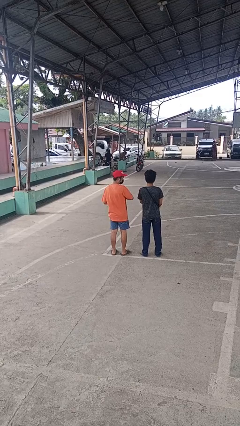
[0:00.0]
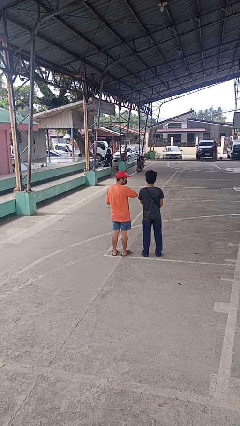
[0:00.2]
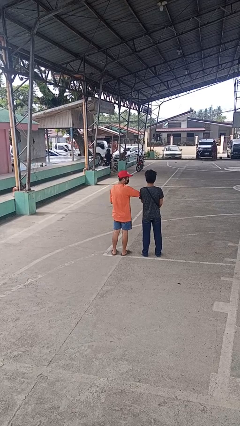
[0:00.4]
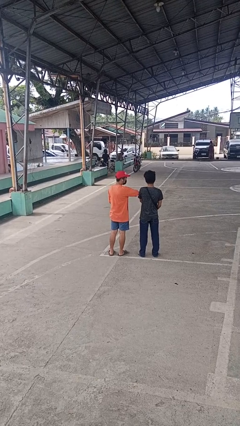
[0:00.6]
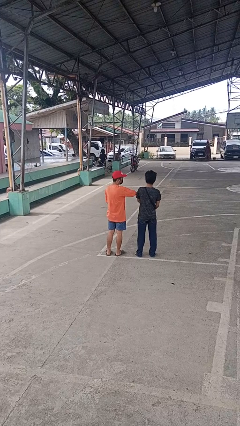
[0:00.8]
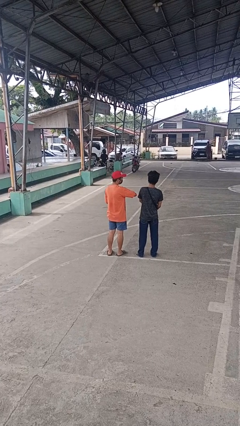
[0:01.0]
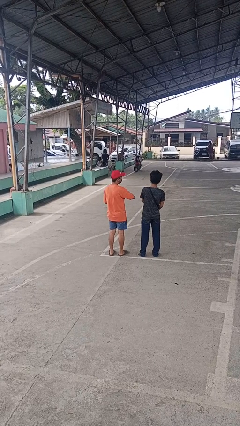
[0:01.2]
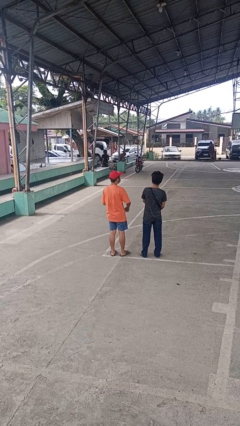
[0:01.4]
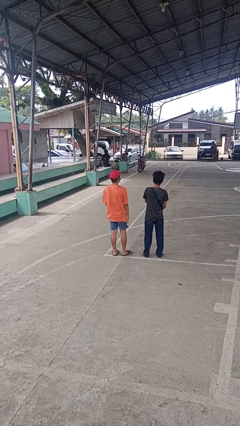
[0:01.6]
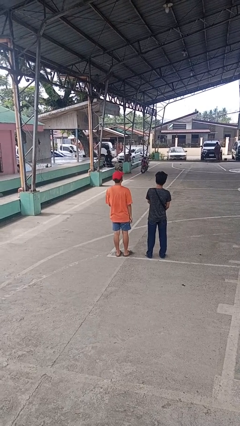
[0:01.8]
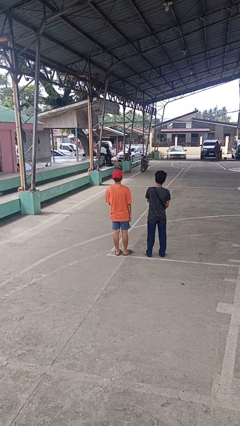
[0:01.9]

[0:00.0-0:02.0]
person nudges person with elbow

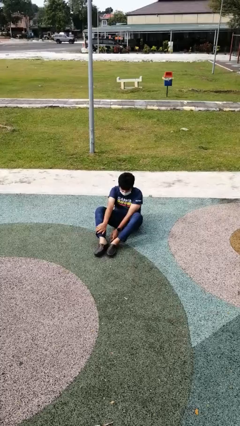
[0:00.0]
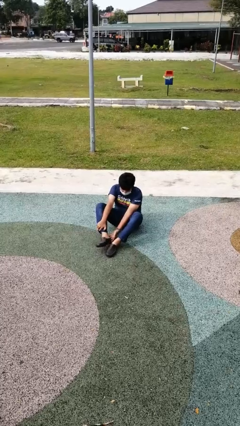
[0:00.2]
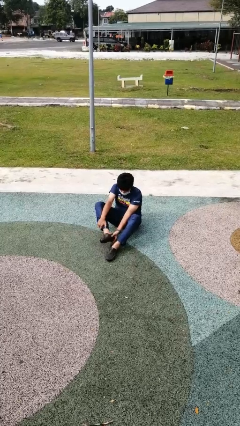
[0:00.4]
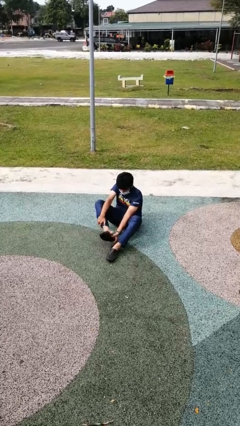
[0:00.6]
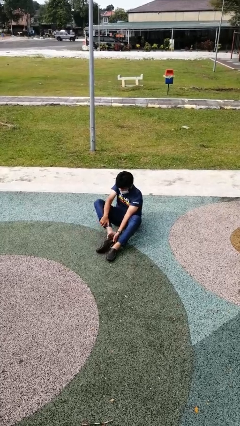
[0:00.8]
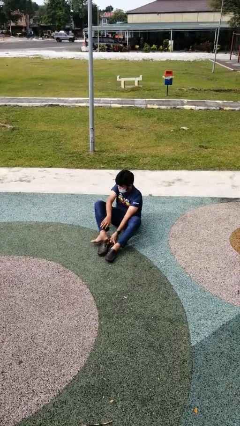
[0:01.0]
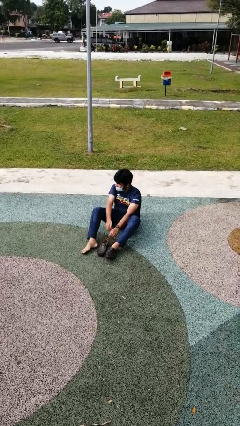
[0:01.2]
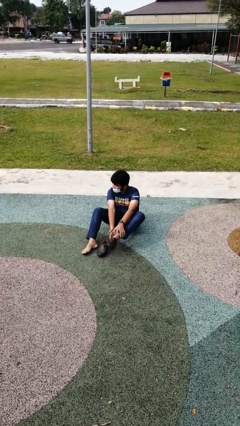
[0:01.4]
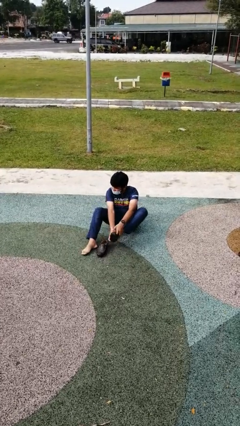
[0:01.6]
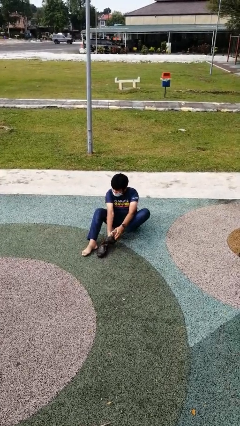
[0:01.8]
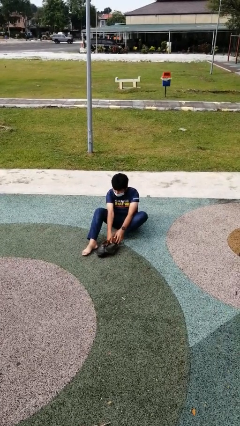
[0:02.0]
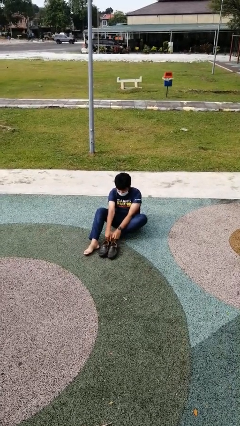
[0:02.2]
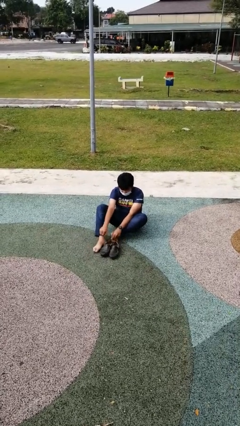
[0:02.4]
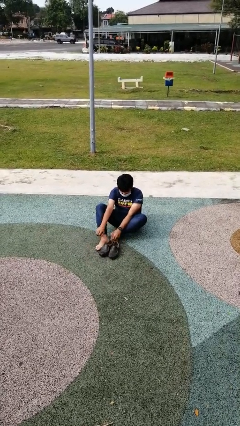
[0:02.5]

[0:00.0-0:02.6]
person takes off shoes

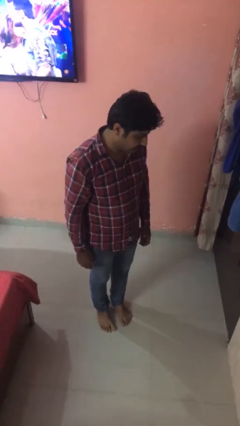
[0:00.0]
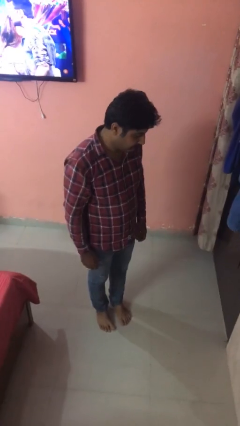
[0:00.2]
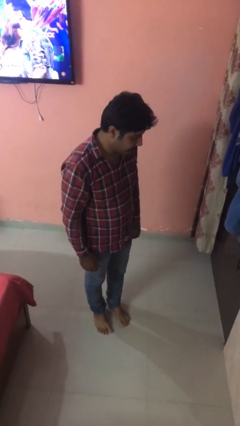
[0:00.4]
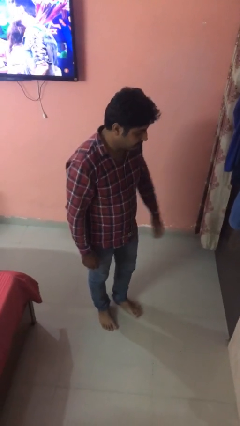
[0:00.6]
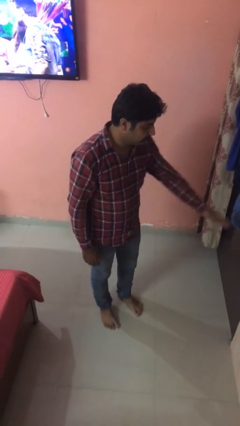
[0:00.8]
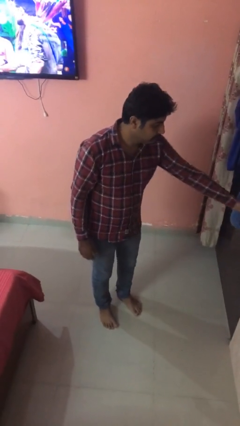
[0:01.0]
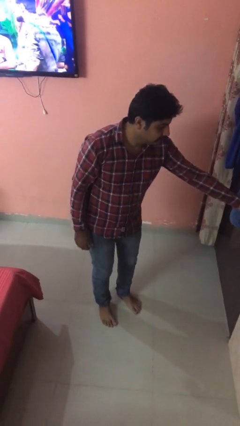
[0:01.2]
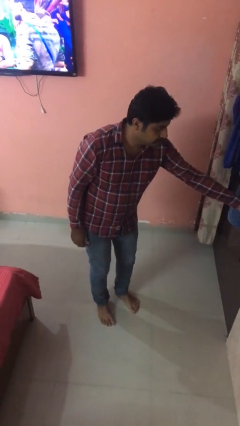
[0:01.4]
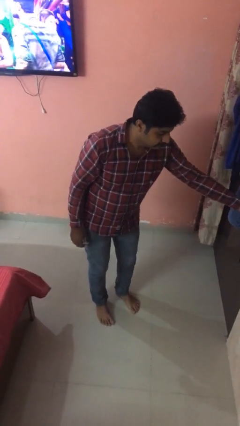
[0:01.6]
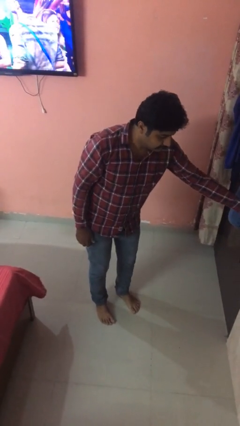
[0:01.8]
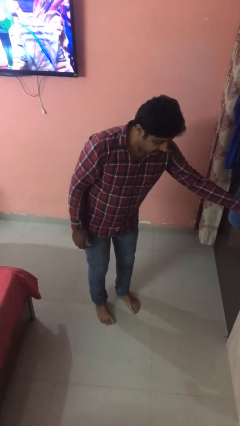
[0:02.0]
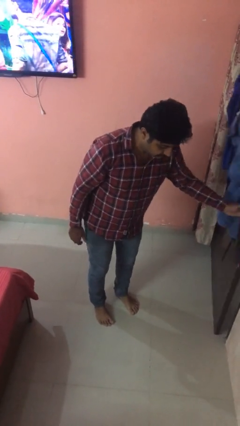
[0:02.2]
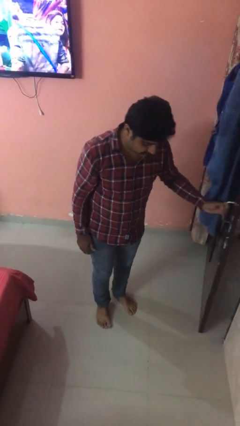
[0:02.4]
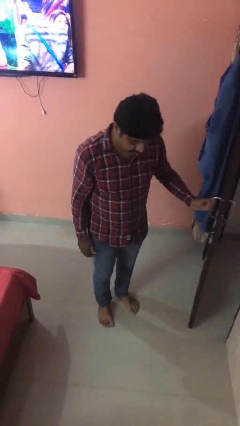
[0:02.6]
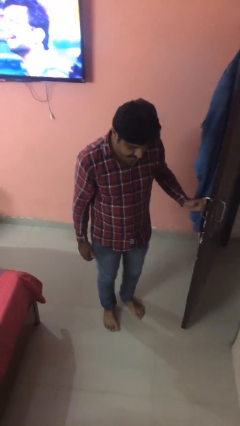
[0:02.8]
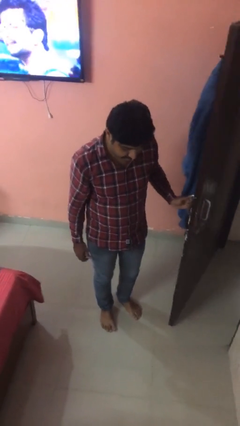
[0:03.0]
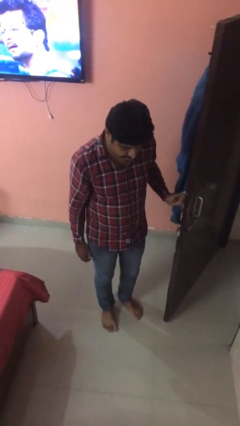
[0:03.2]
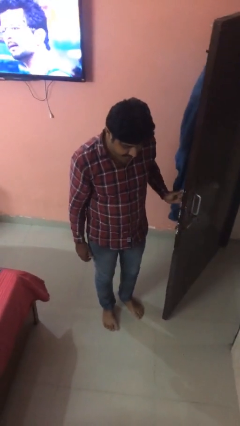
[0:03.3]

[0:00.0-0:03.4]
person opens facility door

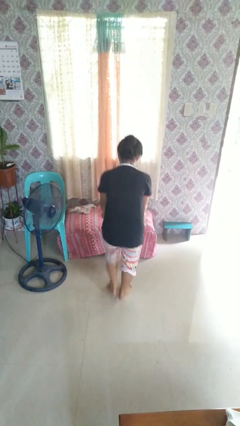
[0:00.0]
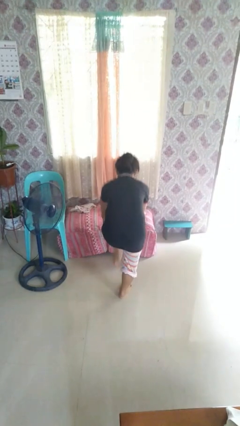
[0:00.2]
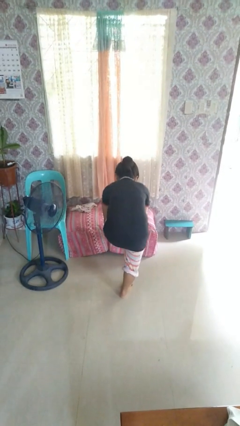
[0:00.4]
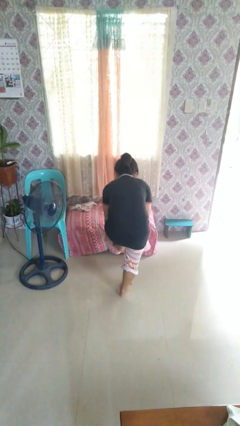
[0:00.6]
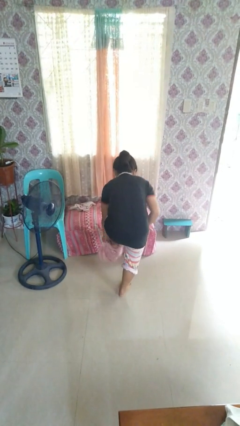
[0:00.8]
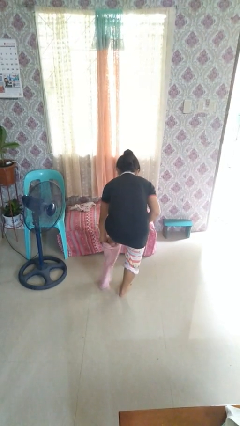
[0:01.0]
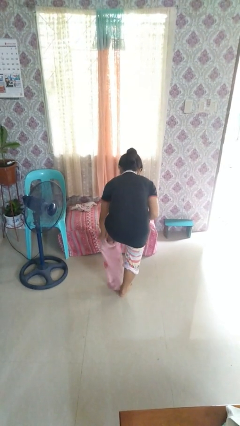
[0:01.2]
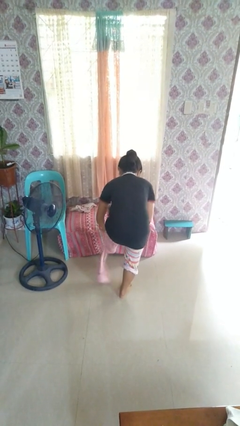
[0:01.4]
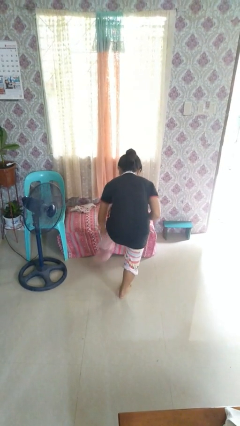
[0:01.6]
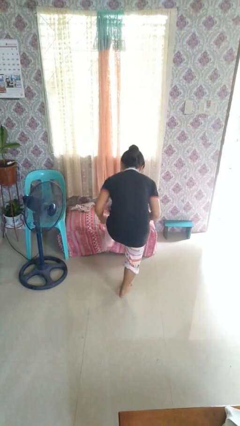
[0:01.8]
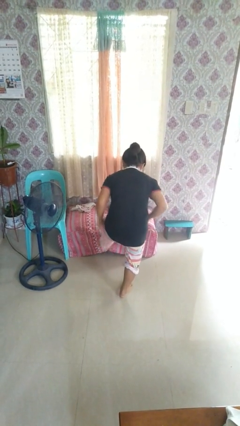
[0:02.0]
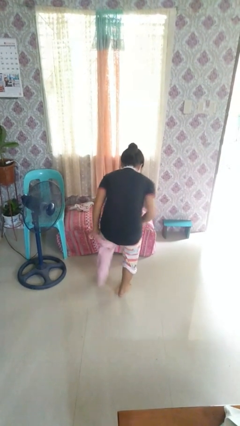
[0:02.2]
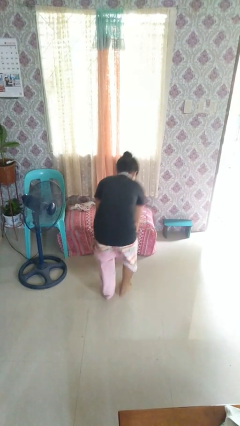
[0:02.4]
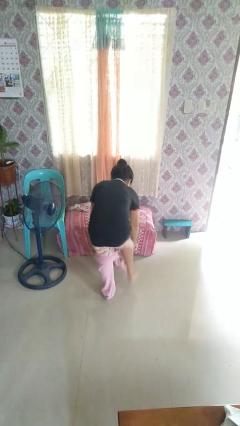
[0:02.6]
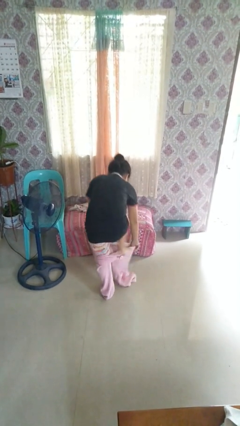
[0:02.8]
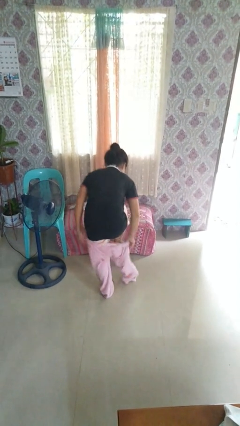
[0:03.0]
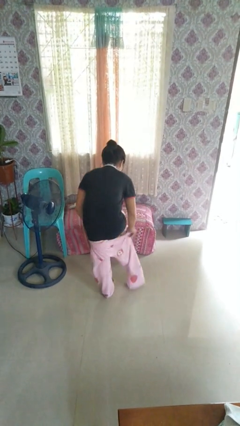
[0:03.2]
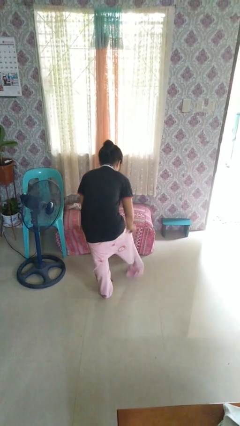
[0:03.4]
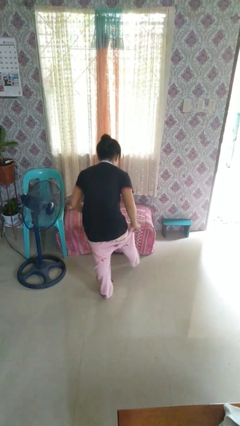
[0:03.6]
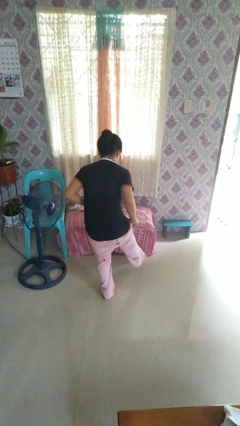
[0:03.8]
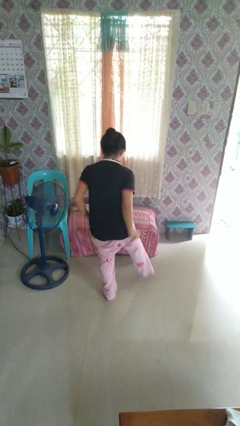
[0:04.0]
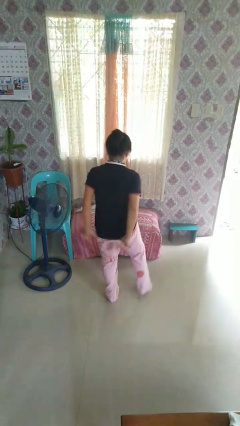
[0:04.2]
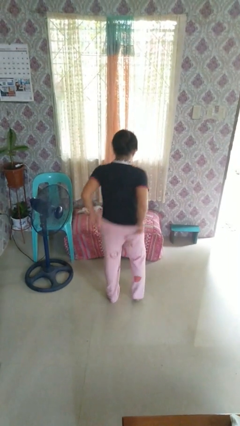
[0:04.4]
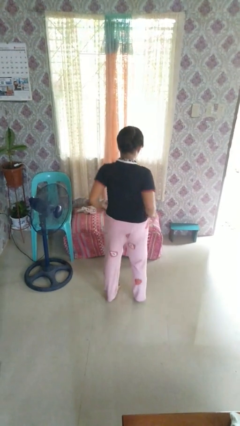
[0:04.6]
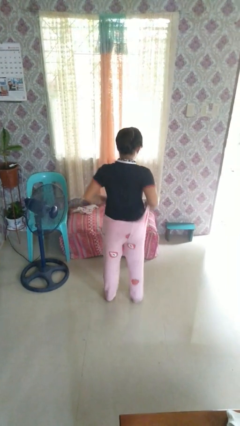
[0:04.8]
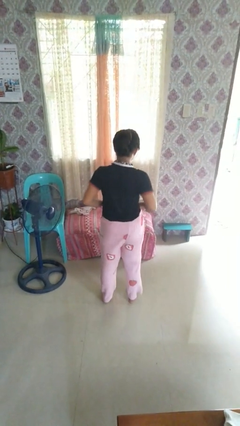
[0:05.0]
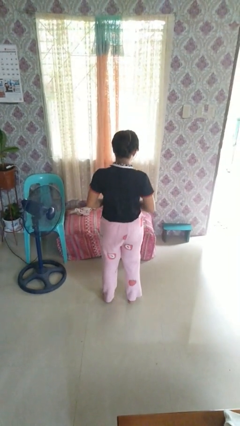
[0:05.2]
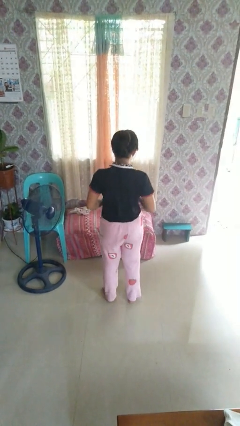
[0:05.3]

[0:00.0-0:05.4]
person puts on pants

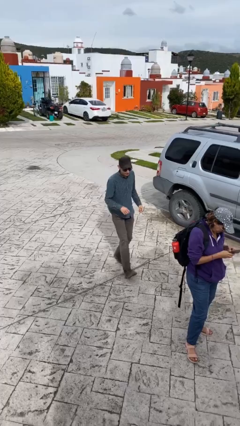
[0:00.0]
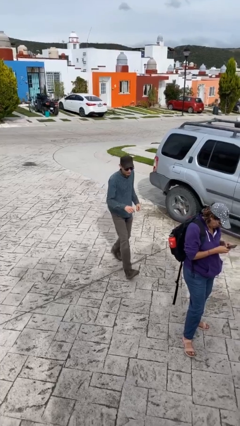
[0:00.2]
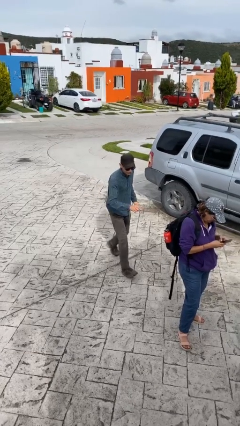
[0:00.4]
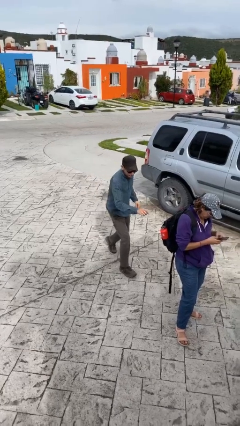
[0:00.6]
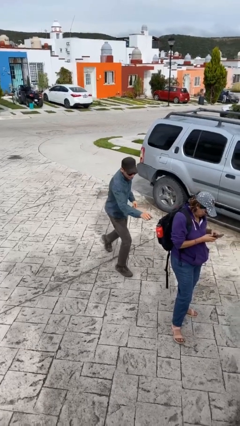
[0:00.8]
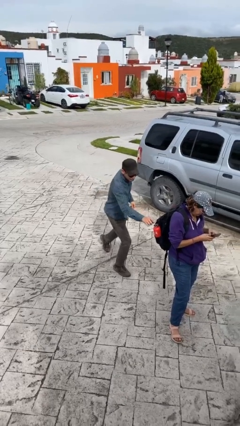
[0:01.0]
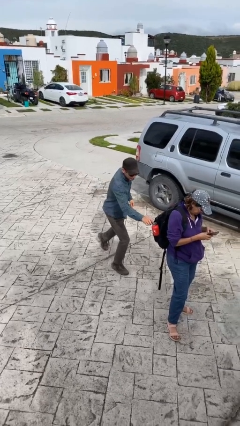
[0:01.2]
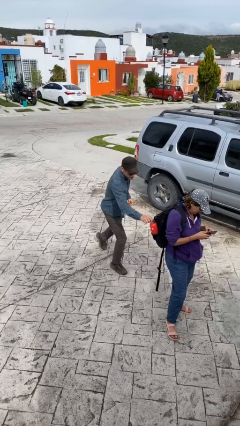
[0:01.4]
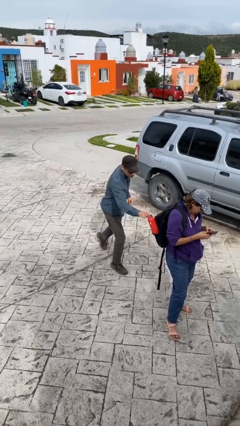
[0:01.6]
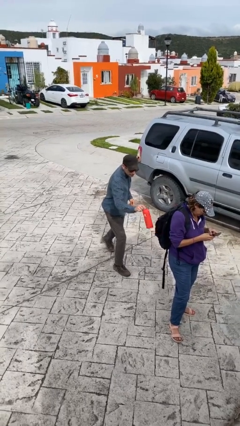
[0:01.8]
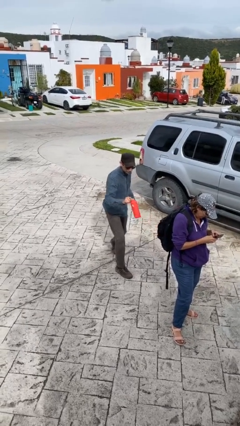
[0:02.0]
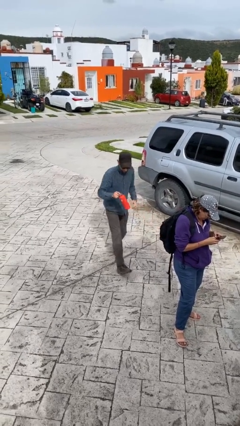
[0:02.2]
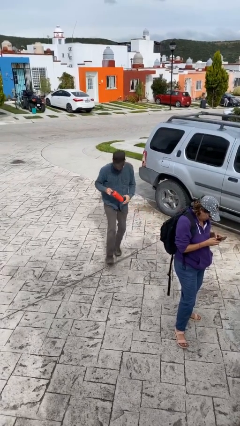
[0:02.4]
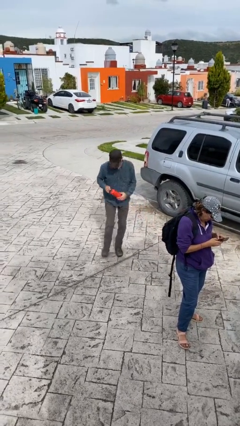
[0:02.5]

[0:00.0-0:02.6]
person steals object from person

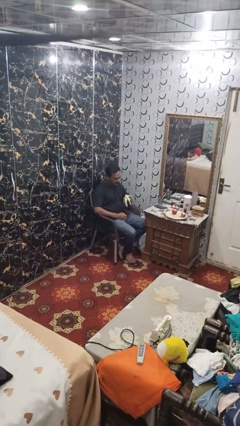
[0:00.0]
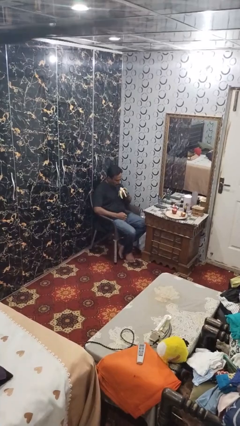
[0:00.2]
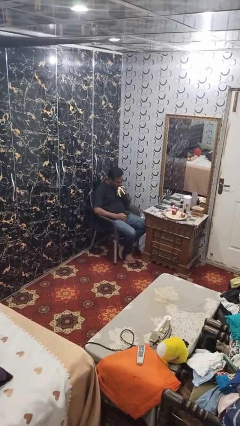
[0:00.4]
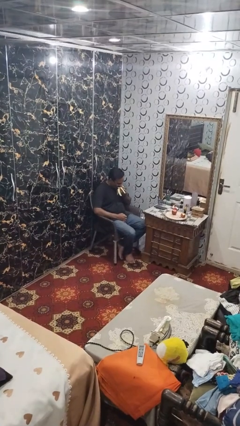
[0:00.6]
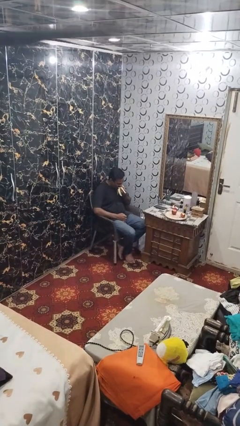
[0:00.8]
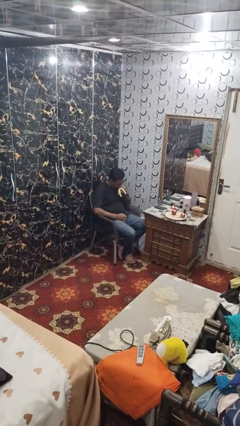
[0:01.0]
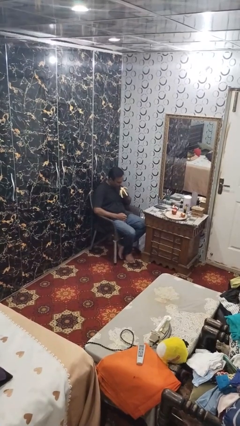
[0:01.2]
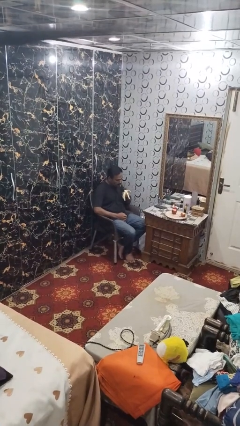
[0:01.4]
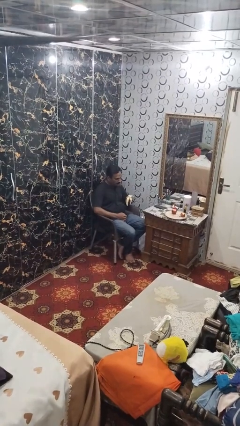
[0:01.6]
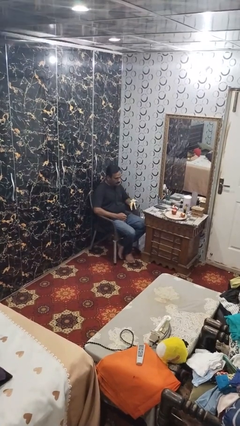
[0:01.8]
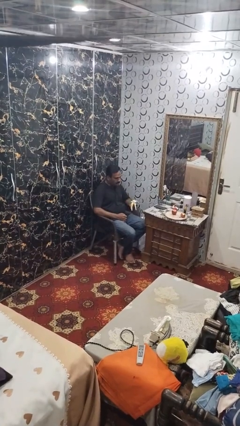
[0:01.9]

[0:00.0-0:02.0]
person eats banana
